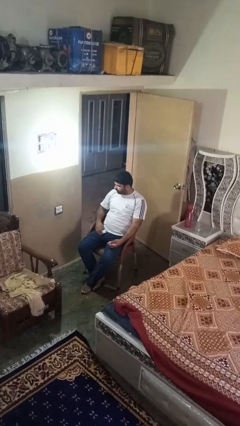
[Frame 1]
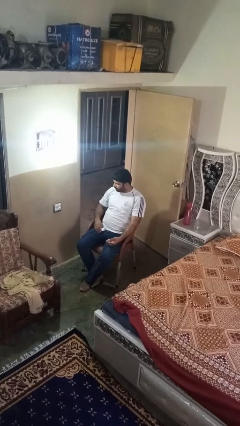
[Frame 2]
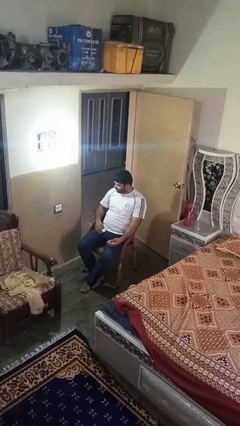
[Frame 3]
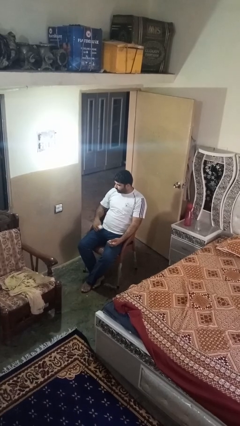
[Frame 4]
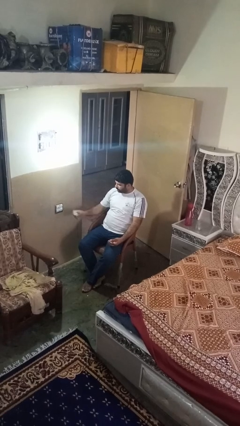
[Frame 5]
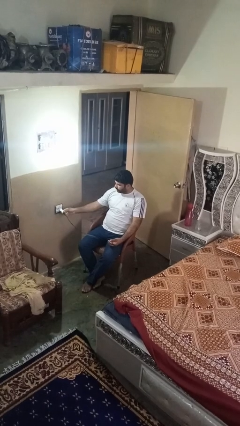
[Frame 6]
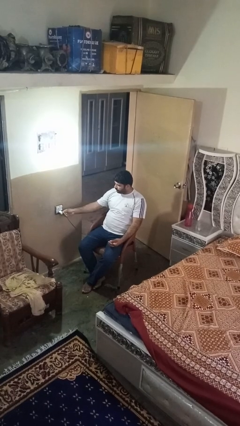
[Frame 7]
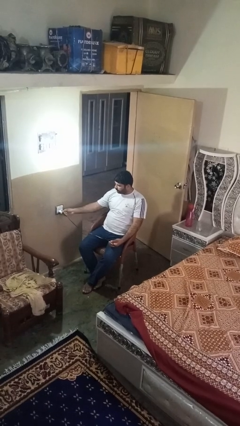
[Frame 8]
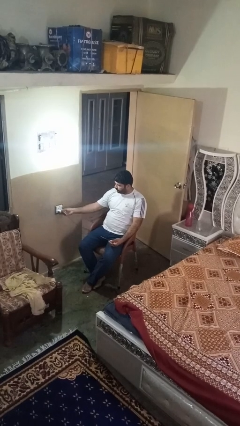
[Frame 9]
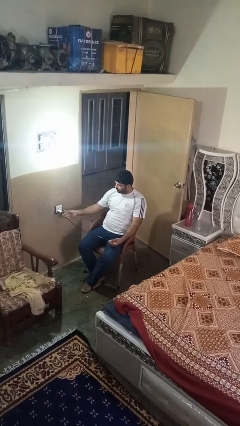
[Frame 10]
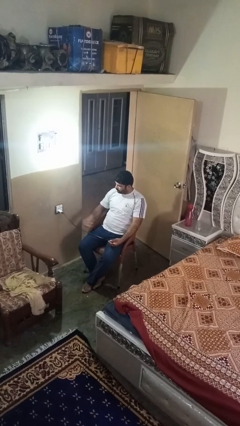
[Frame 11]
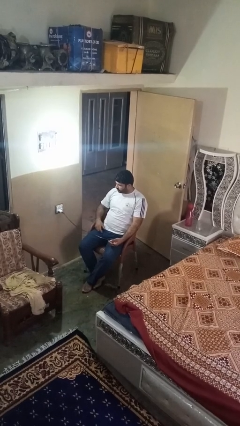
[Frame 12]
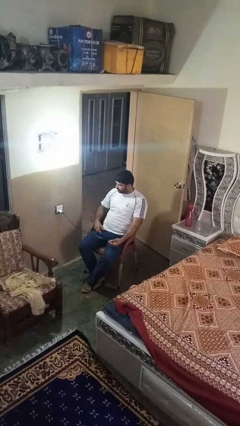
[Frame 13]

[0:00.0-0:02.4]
person plugs into electrical socket

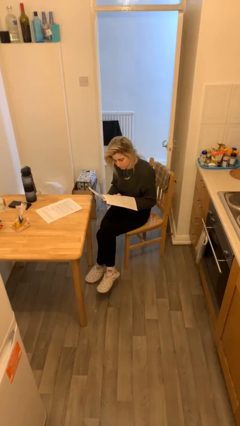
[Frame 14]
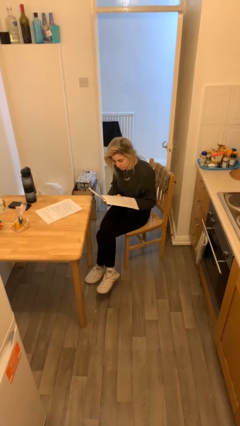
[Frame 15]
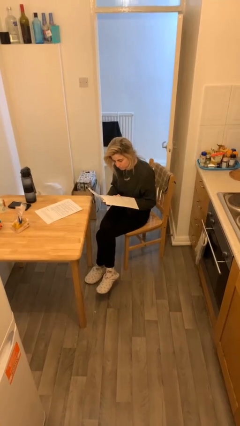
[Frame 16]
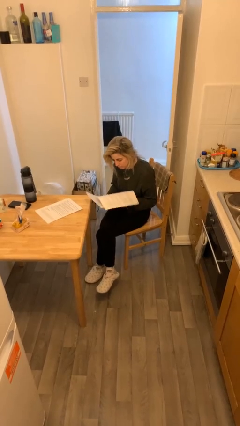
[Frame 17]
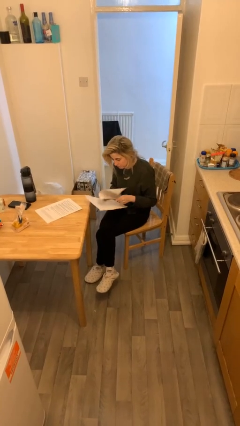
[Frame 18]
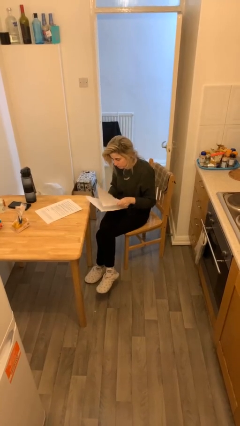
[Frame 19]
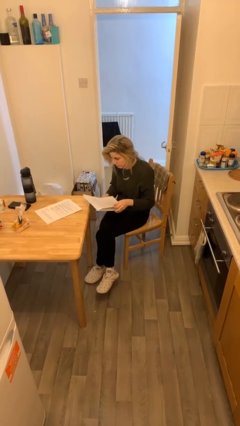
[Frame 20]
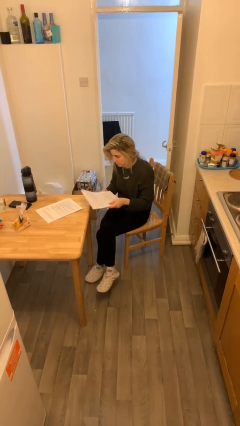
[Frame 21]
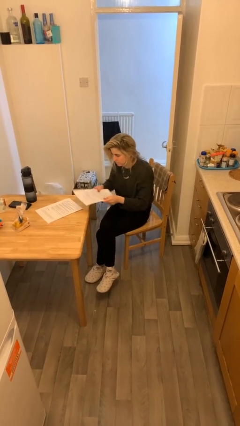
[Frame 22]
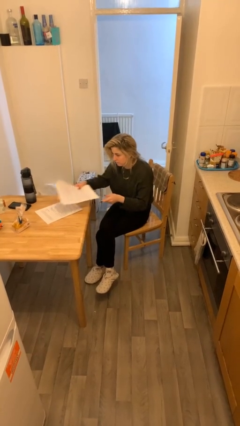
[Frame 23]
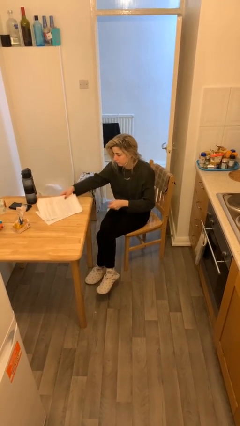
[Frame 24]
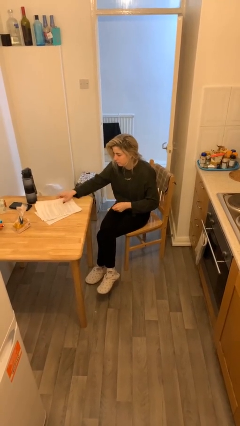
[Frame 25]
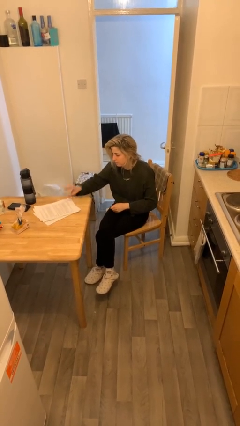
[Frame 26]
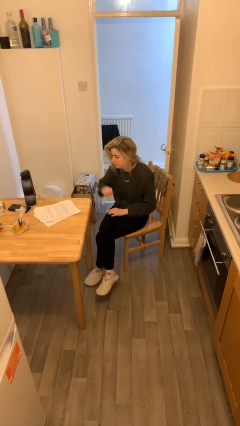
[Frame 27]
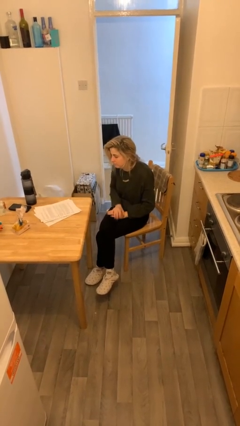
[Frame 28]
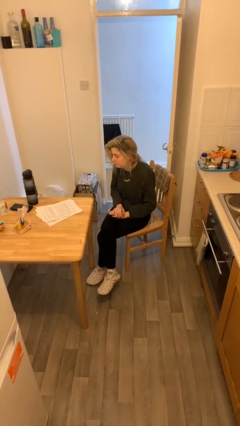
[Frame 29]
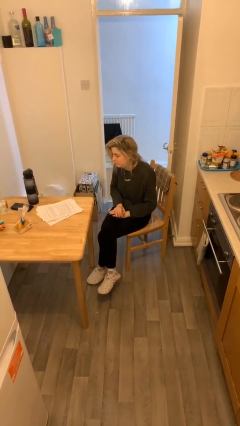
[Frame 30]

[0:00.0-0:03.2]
person puts down object on table

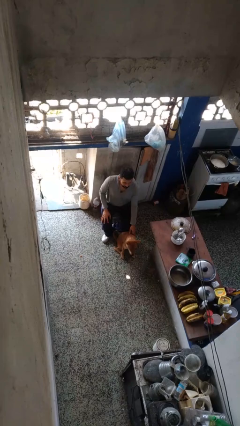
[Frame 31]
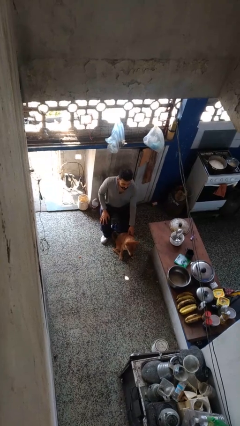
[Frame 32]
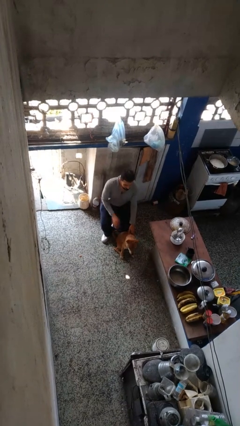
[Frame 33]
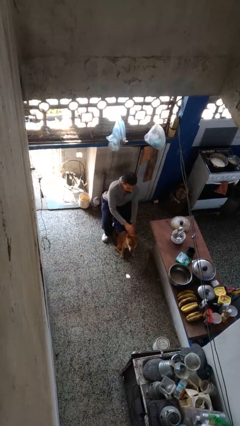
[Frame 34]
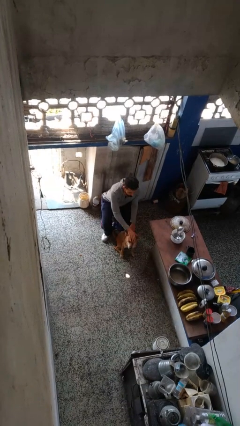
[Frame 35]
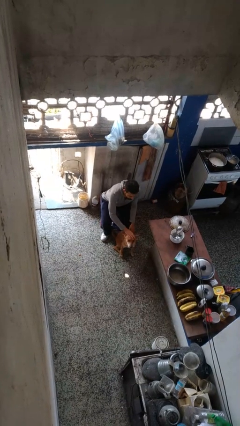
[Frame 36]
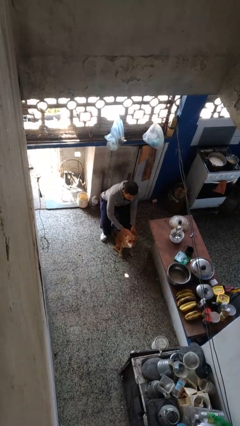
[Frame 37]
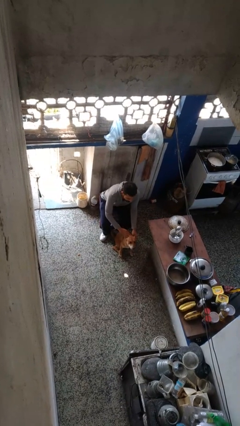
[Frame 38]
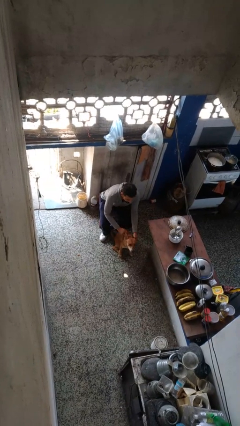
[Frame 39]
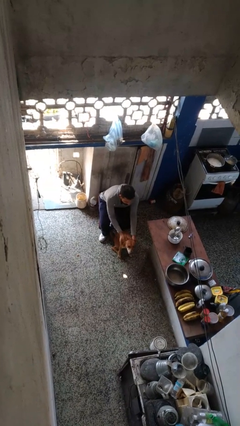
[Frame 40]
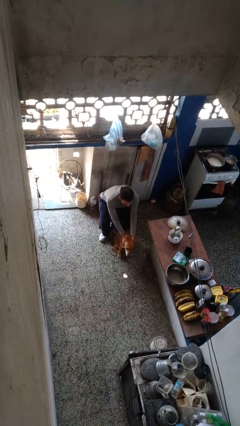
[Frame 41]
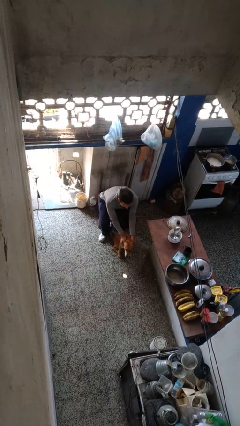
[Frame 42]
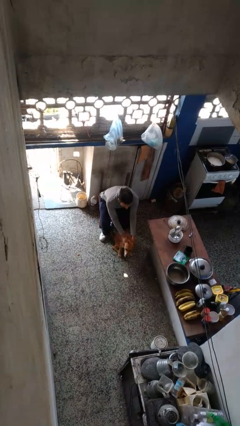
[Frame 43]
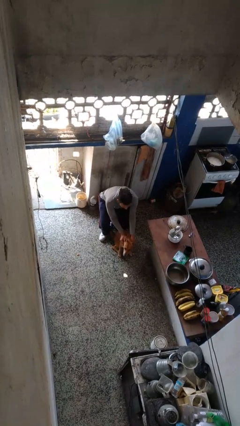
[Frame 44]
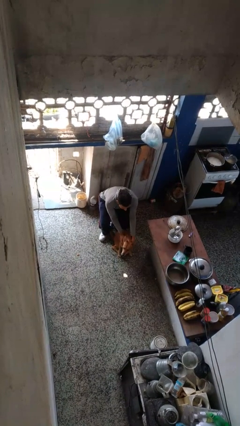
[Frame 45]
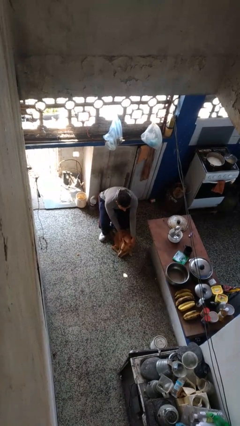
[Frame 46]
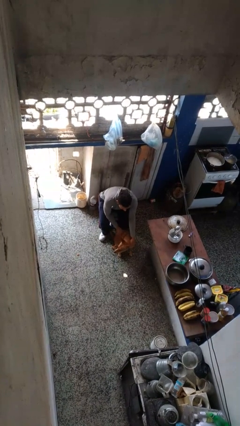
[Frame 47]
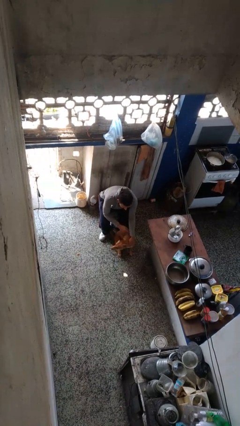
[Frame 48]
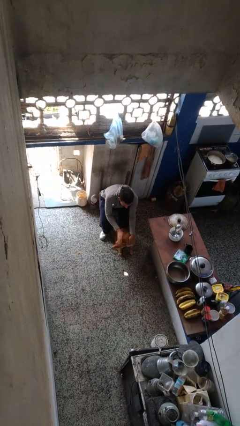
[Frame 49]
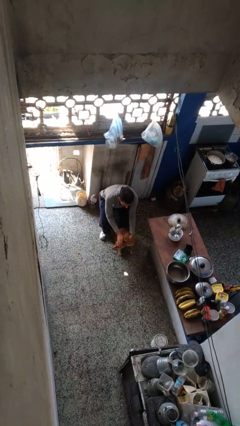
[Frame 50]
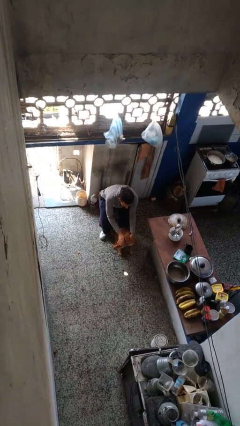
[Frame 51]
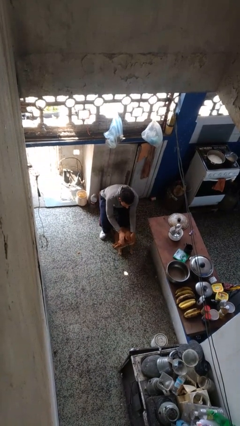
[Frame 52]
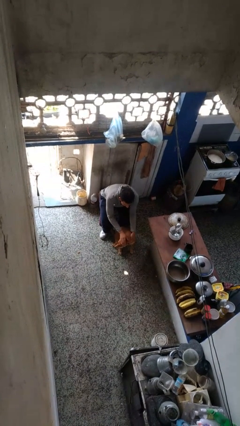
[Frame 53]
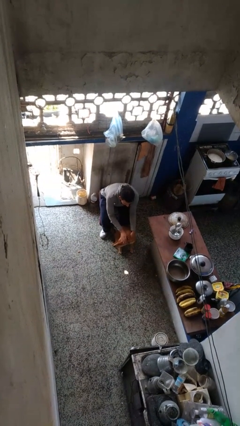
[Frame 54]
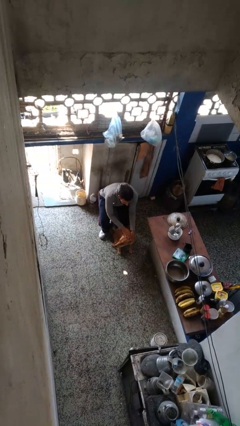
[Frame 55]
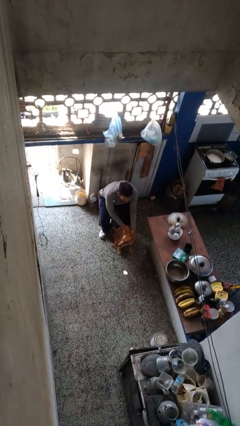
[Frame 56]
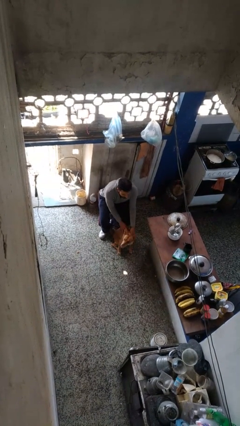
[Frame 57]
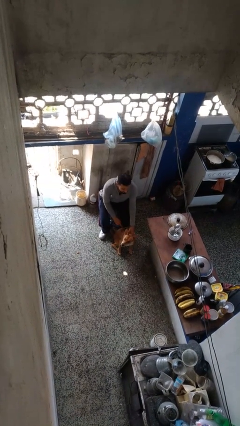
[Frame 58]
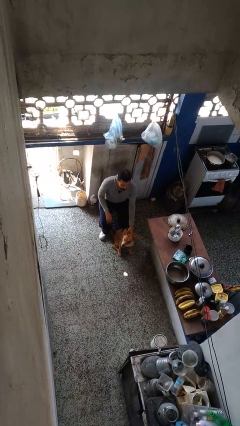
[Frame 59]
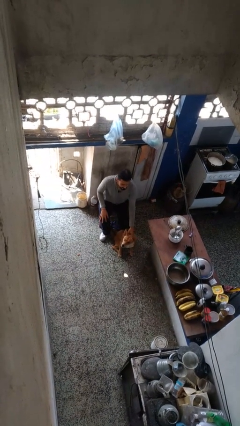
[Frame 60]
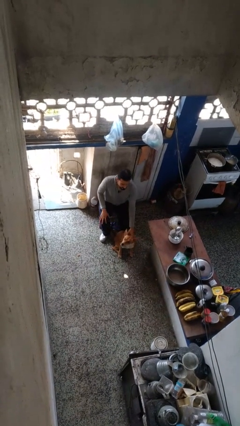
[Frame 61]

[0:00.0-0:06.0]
person pets dog

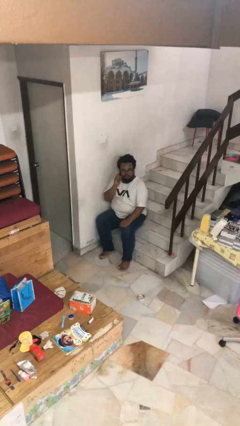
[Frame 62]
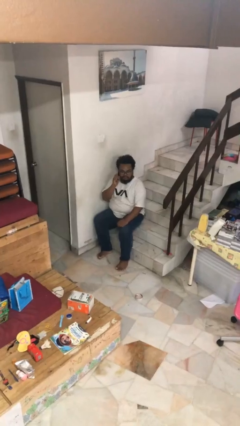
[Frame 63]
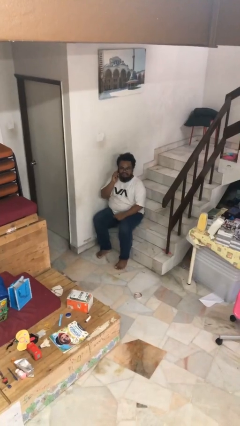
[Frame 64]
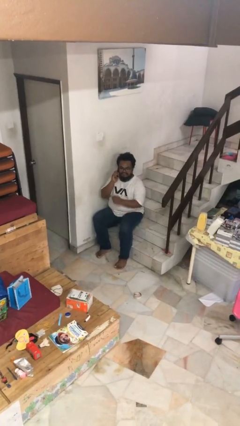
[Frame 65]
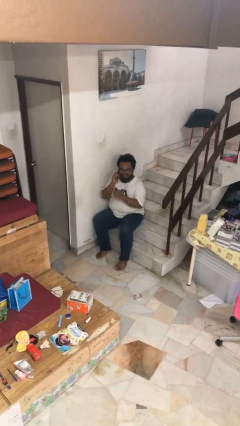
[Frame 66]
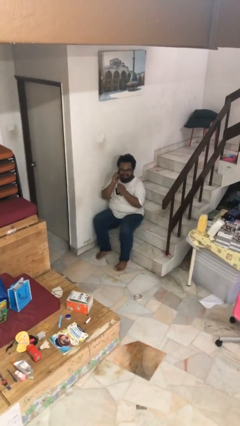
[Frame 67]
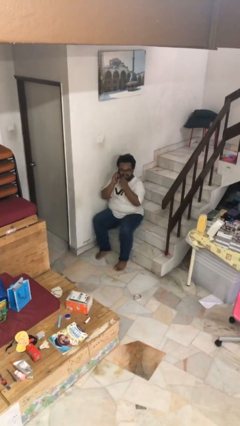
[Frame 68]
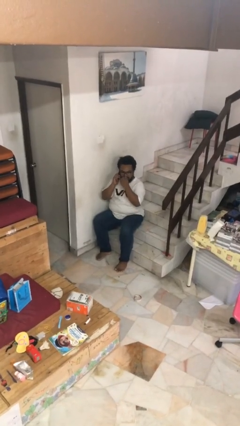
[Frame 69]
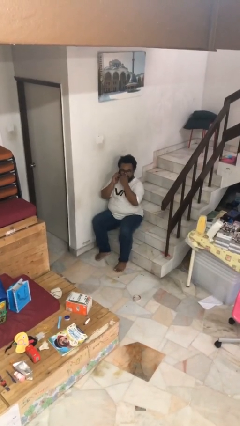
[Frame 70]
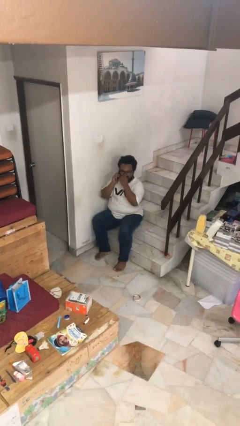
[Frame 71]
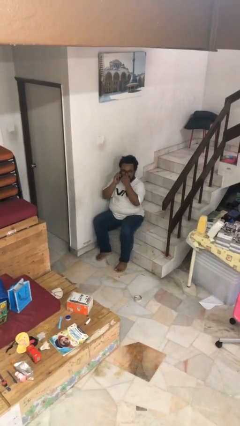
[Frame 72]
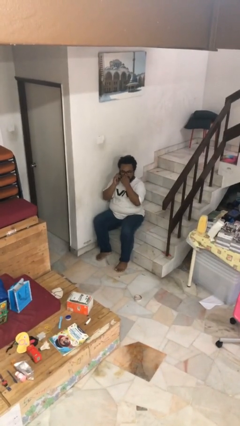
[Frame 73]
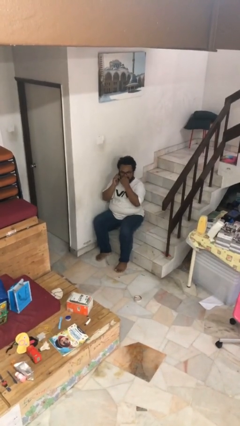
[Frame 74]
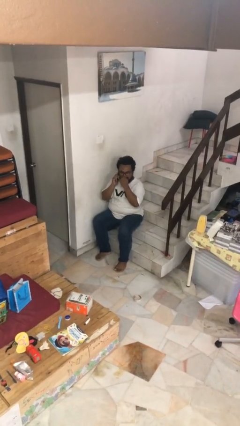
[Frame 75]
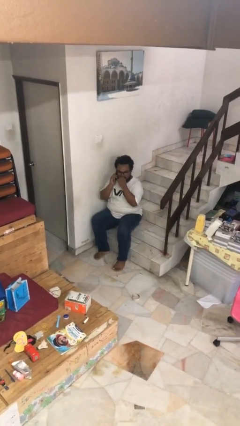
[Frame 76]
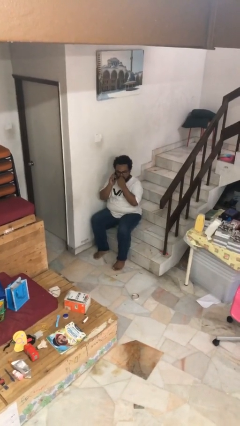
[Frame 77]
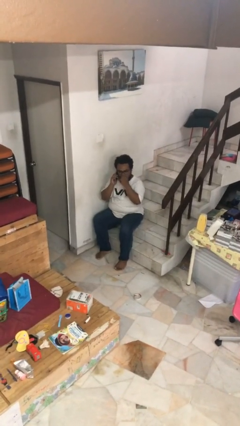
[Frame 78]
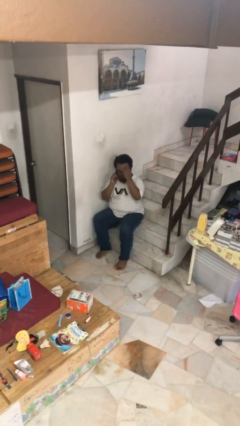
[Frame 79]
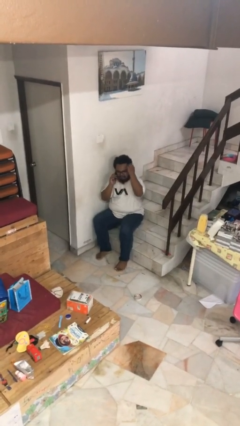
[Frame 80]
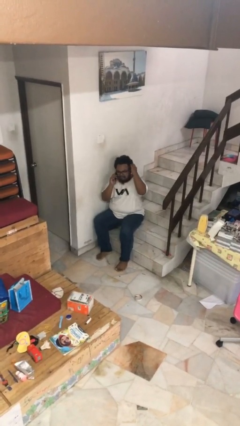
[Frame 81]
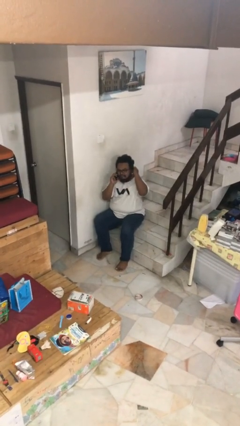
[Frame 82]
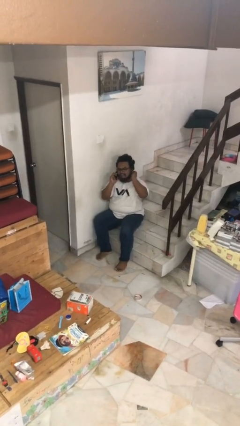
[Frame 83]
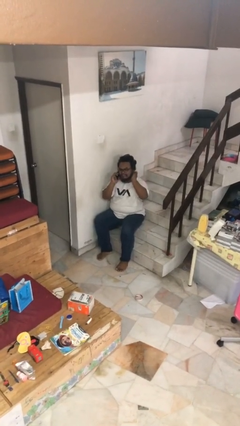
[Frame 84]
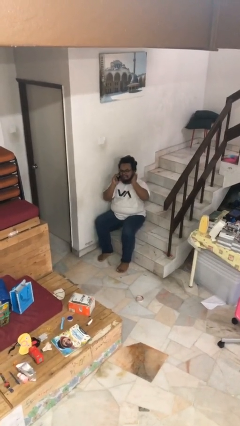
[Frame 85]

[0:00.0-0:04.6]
person talks on phone

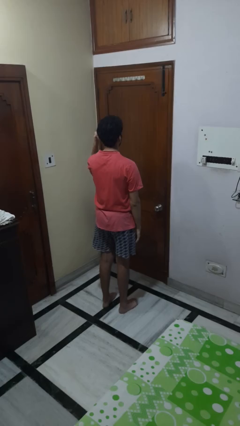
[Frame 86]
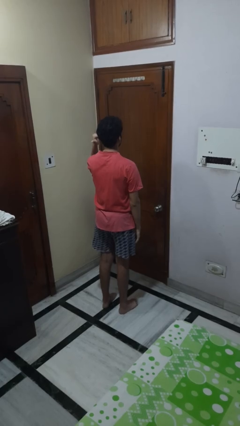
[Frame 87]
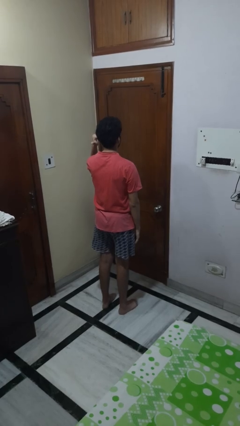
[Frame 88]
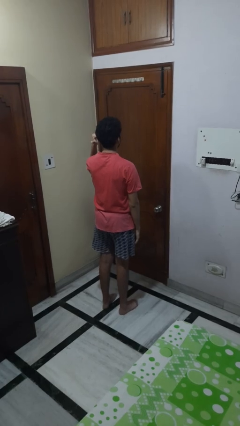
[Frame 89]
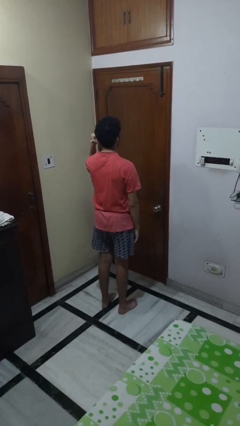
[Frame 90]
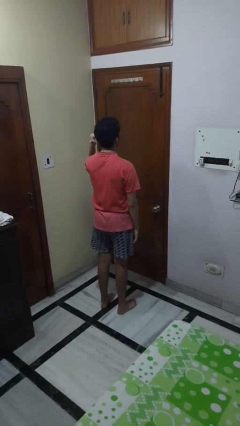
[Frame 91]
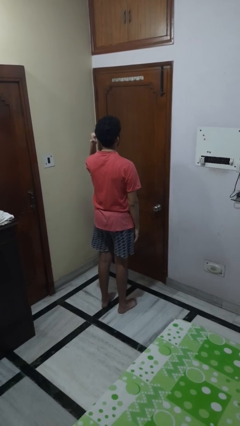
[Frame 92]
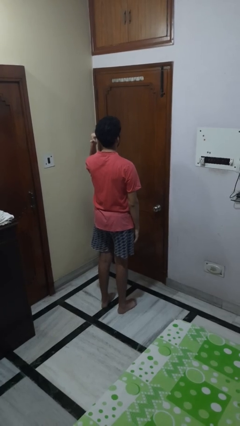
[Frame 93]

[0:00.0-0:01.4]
person gestures behind me

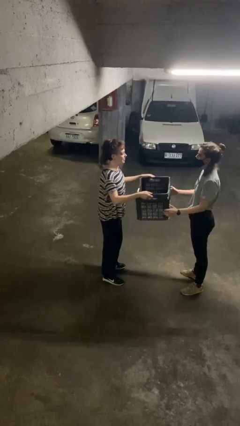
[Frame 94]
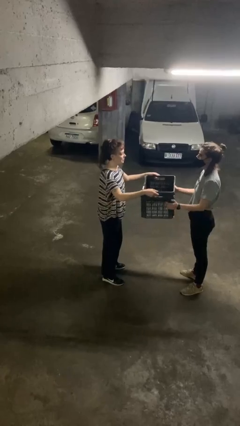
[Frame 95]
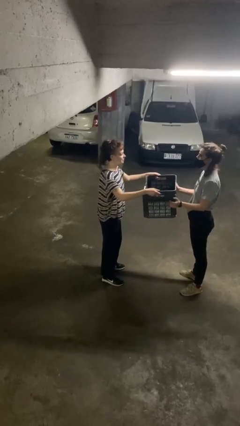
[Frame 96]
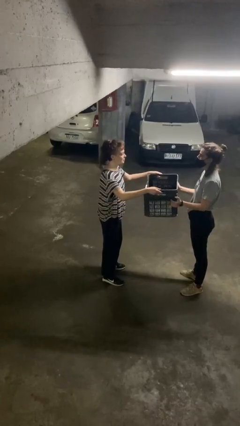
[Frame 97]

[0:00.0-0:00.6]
person transfers object to person
